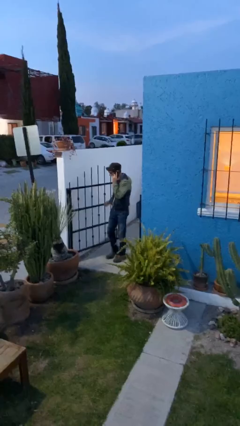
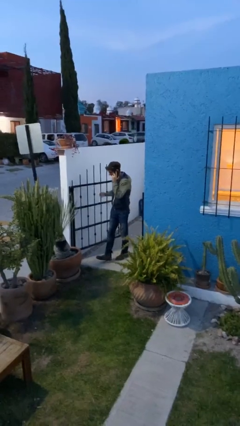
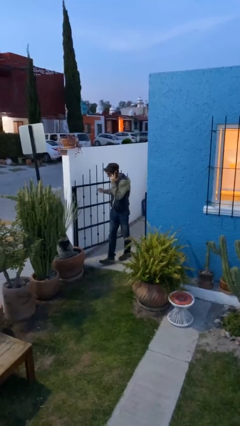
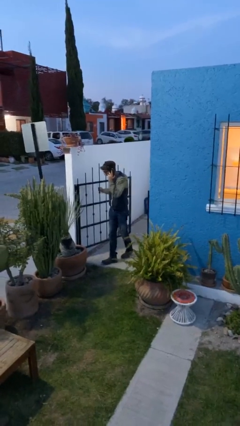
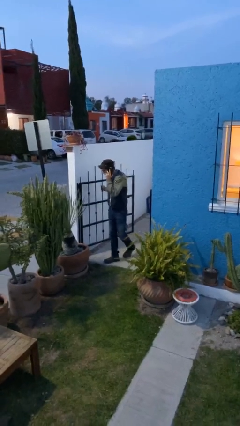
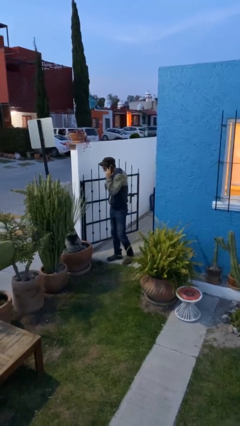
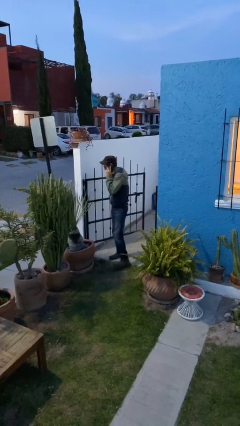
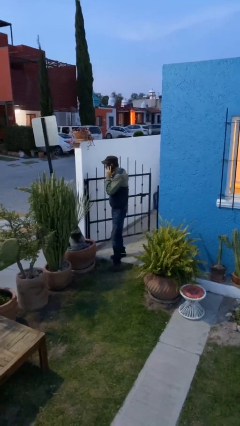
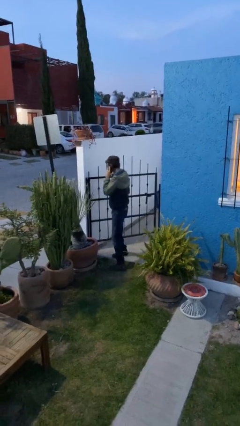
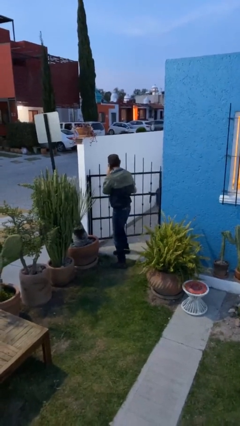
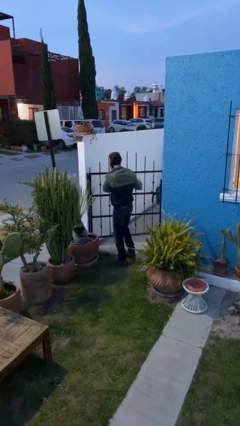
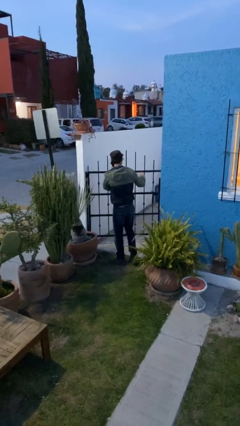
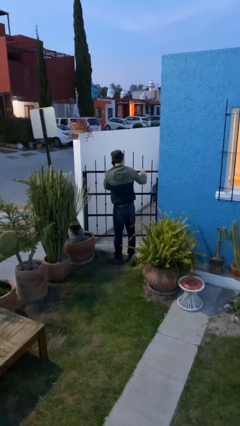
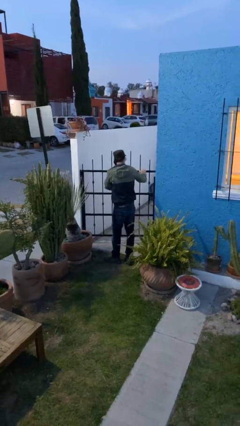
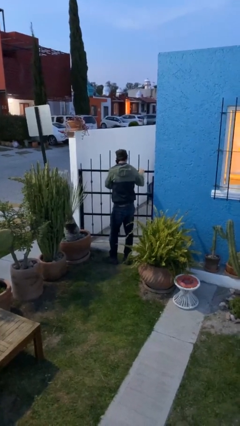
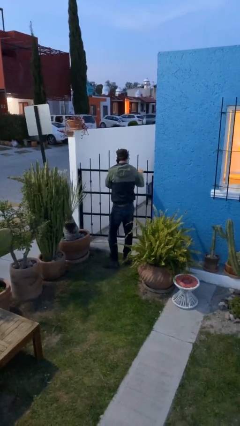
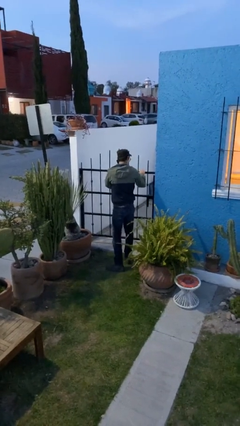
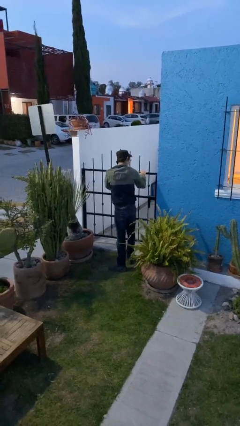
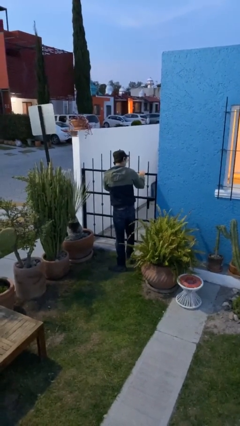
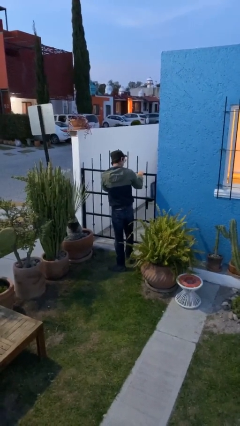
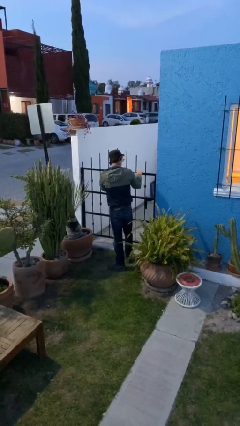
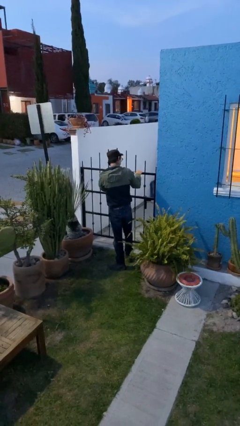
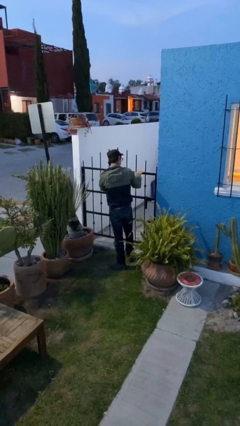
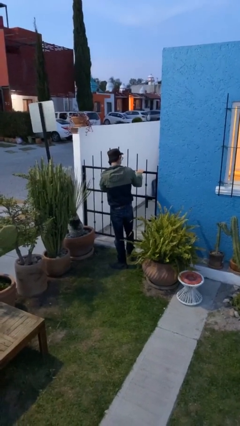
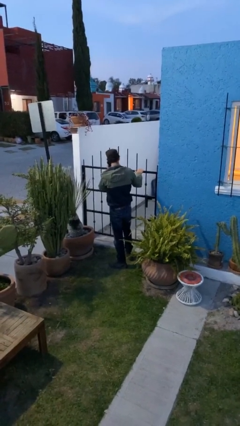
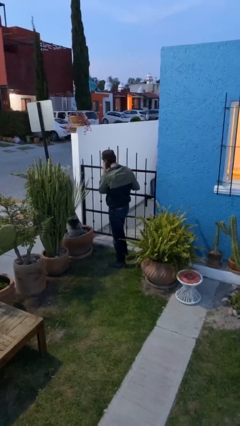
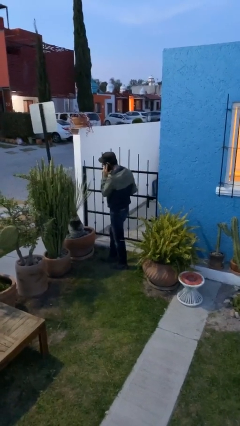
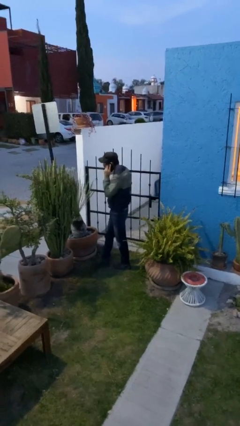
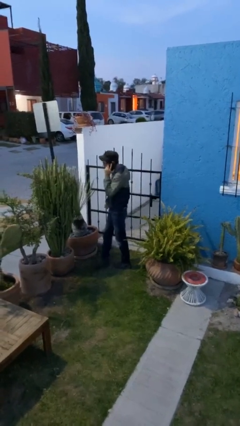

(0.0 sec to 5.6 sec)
person closes facility door

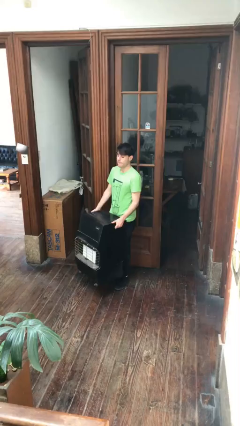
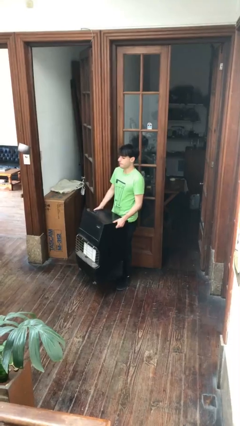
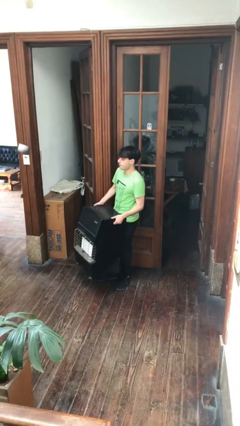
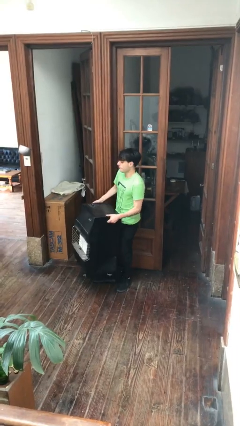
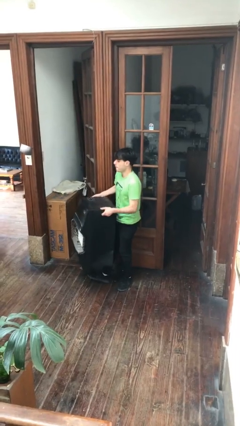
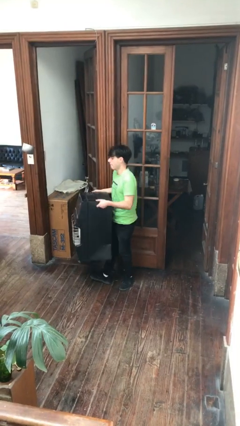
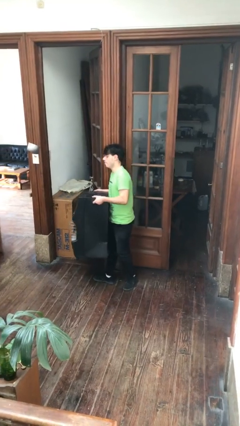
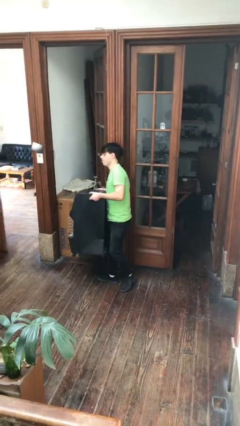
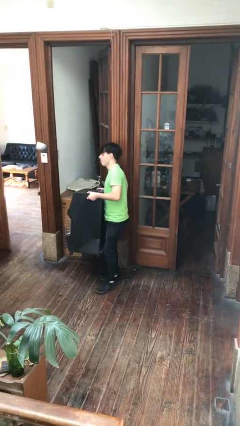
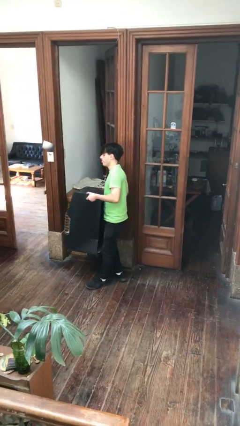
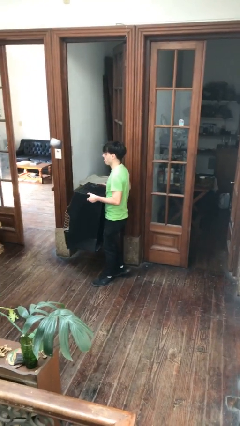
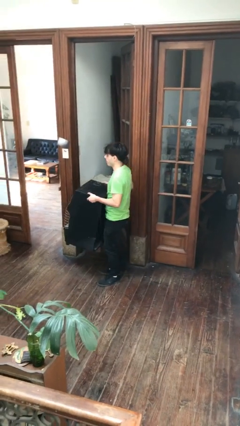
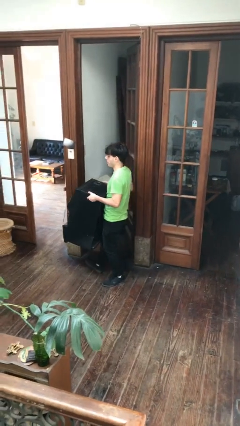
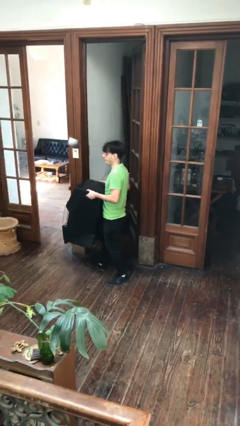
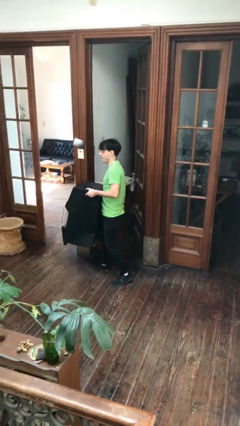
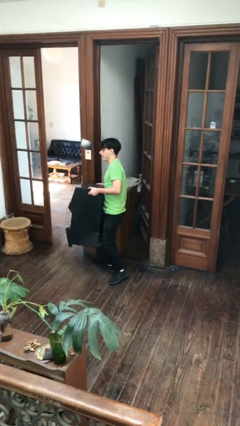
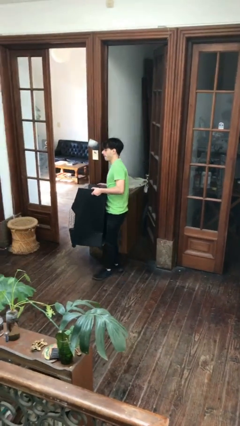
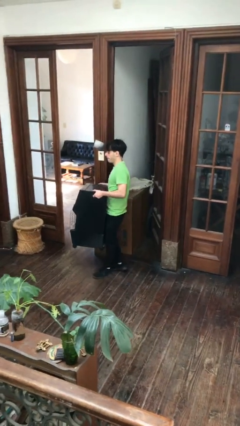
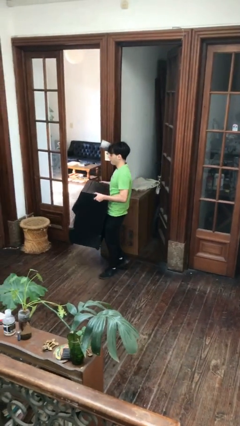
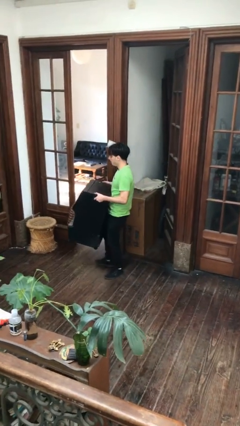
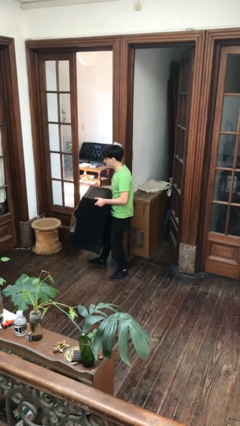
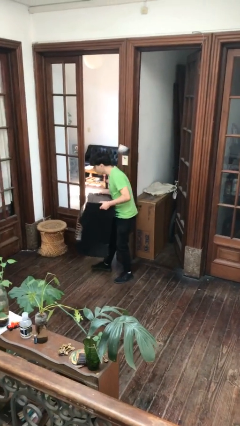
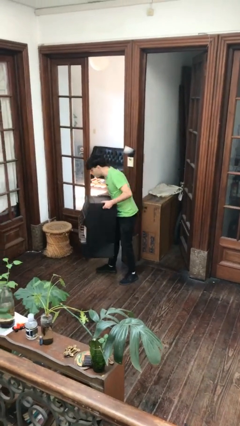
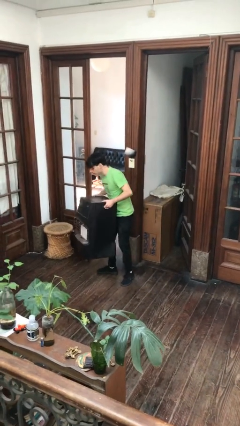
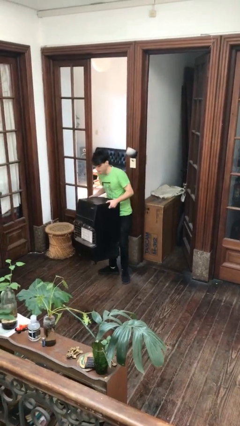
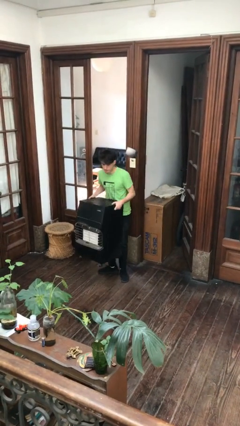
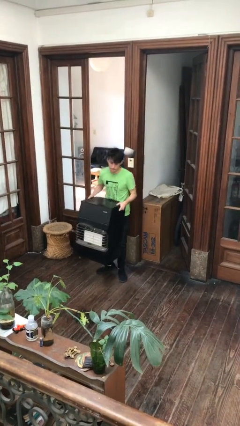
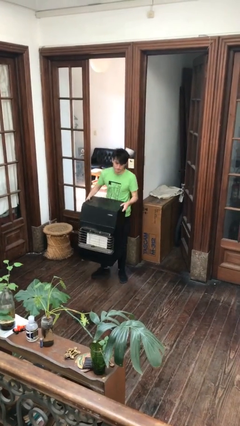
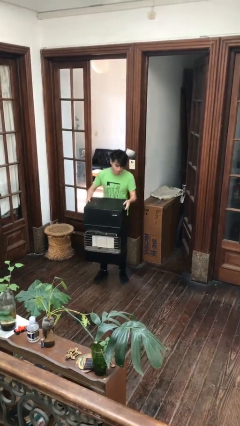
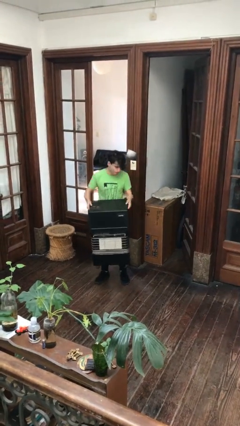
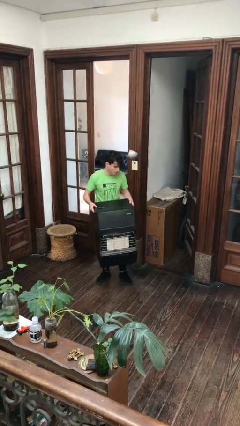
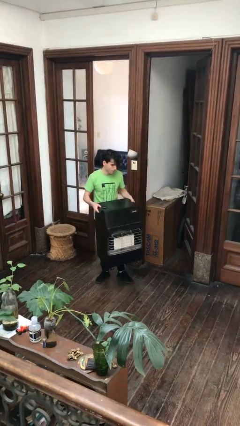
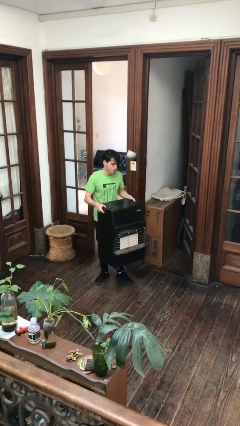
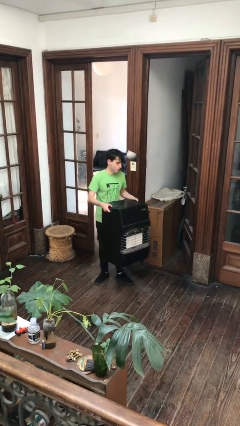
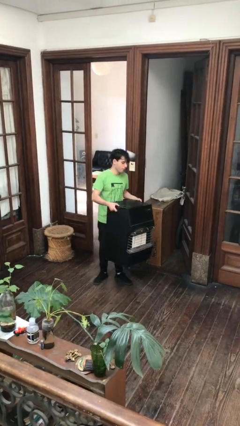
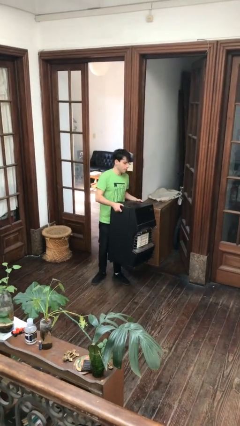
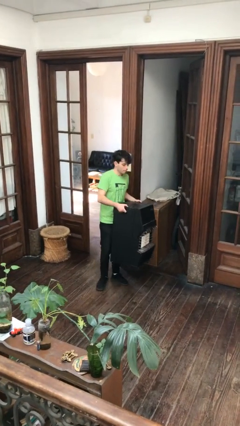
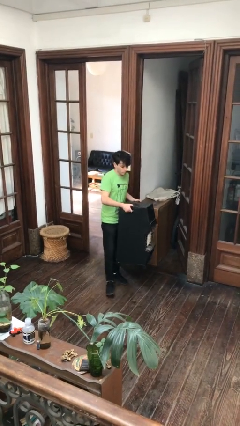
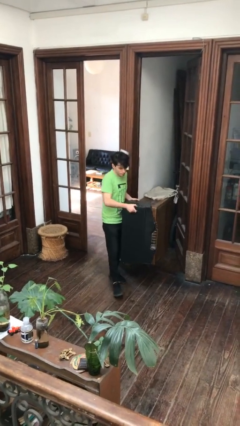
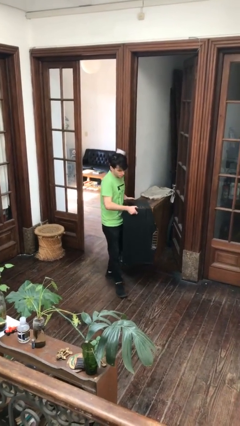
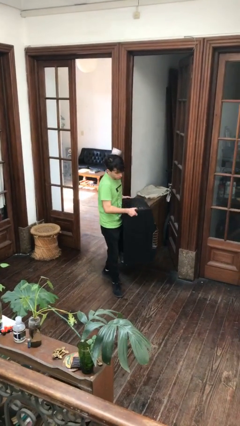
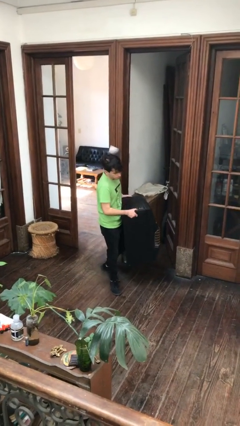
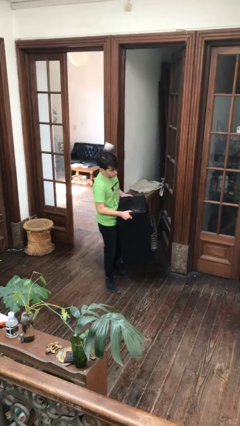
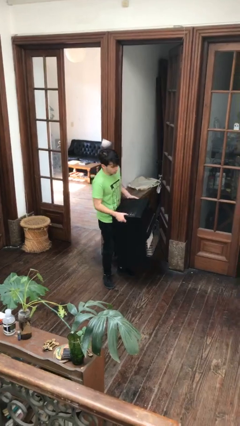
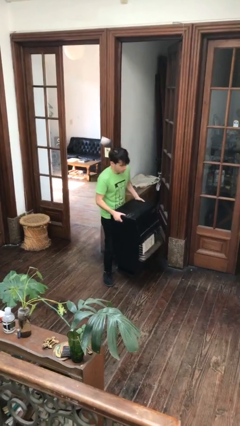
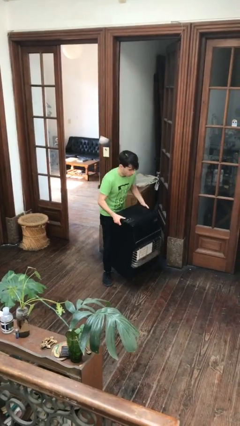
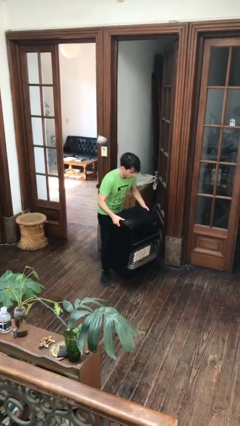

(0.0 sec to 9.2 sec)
person carries heavy object

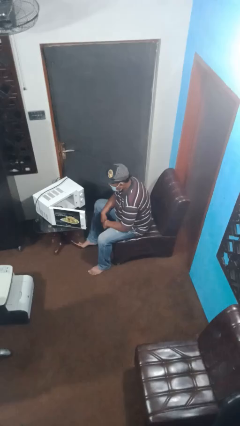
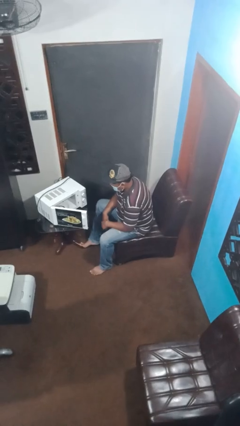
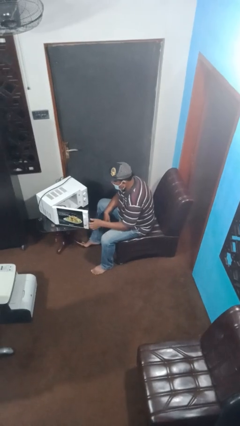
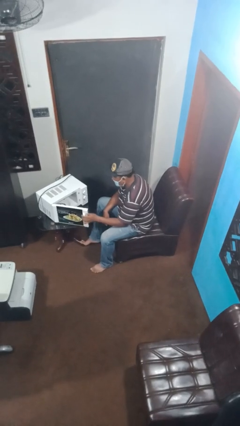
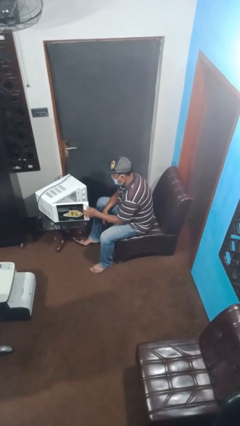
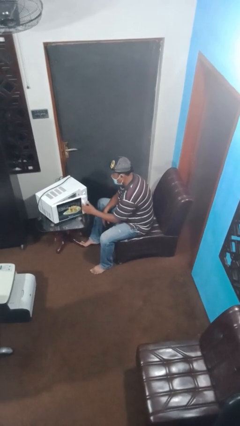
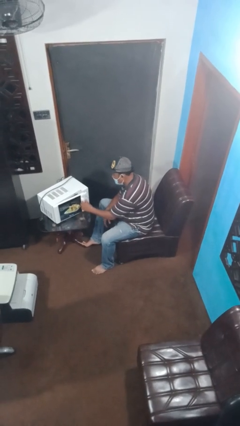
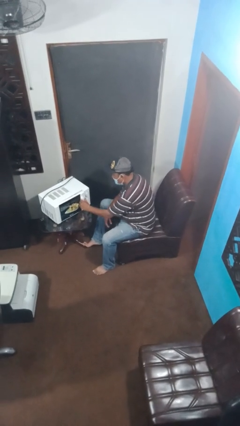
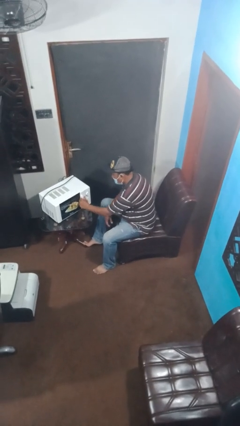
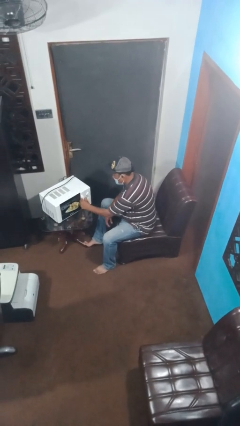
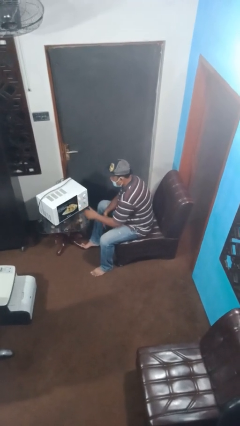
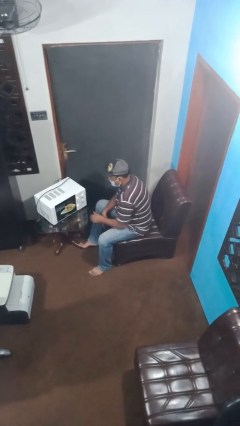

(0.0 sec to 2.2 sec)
person closes microwave

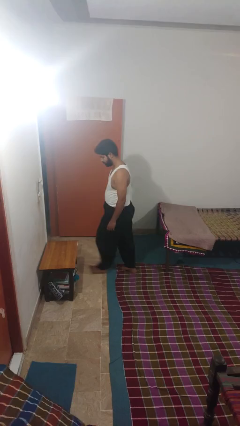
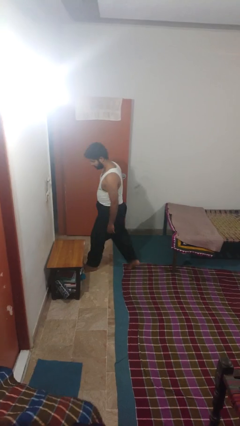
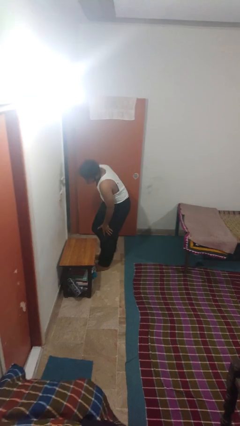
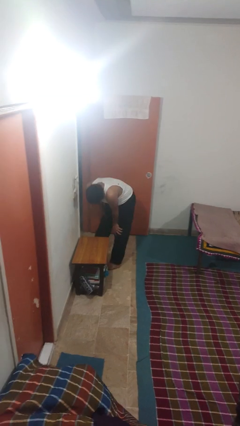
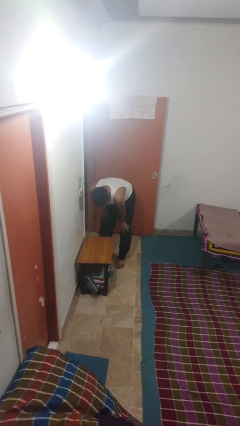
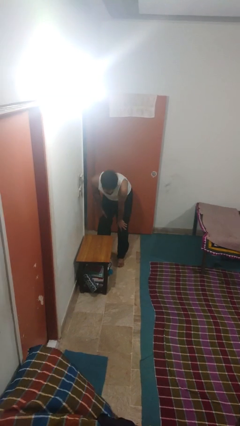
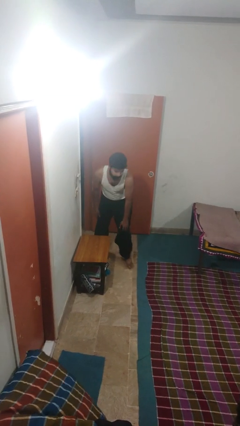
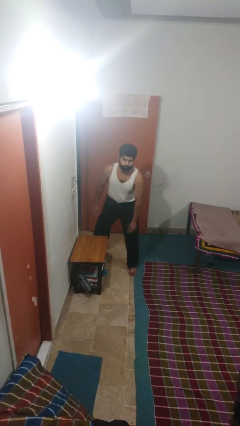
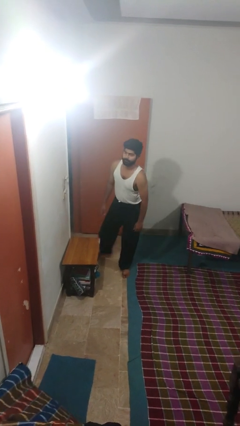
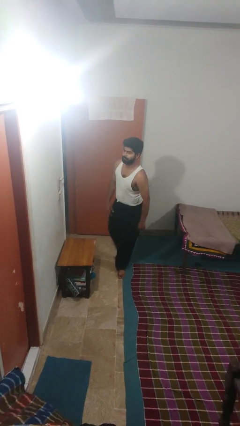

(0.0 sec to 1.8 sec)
person bumps into table
